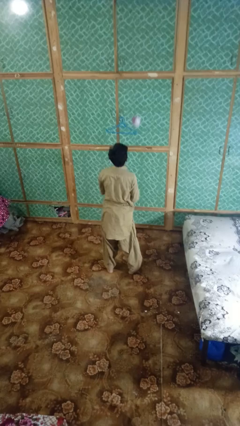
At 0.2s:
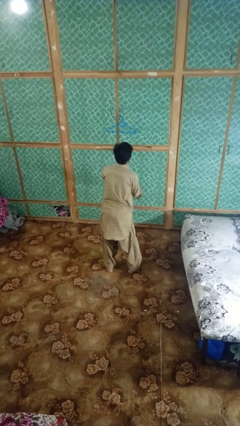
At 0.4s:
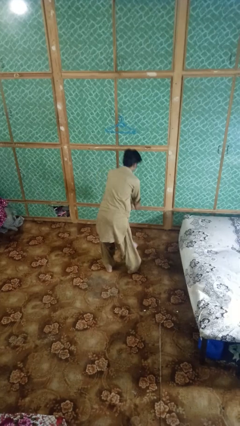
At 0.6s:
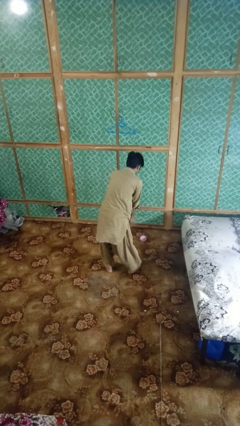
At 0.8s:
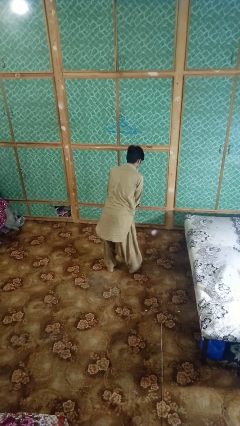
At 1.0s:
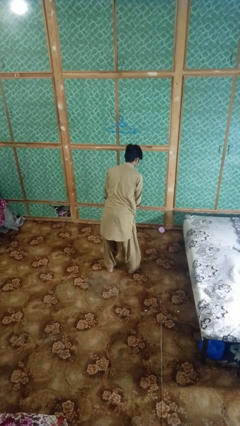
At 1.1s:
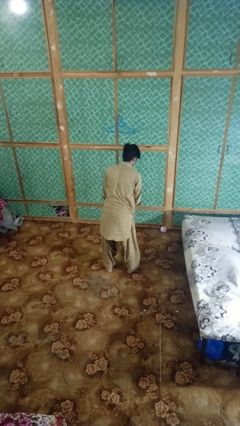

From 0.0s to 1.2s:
person catches dropped object

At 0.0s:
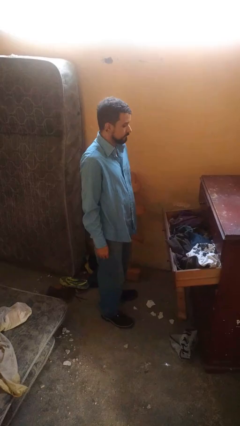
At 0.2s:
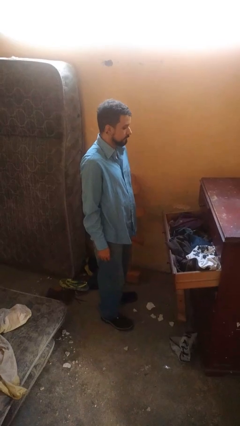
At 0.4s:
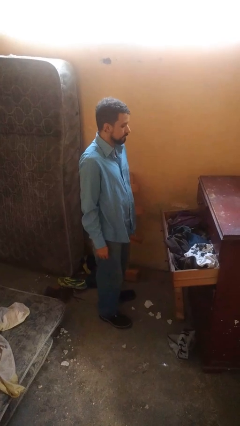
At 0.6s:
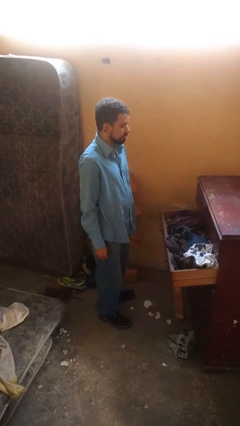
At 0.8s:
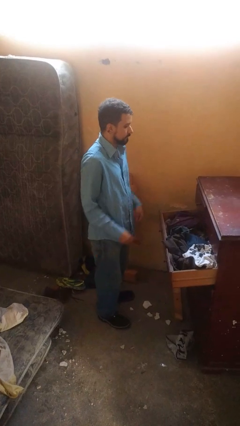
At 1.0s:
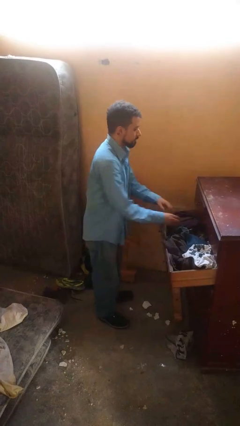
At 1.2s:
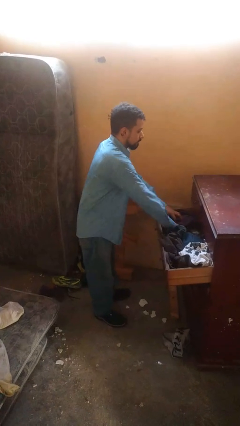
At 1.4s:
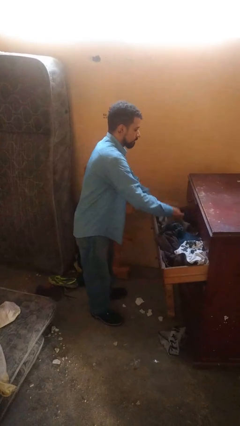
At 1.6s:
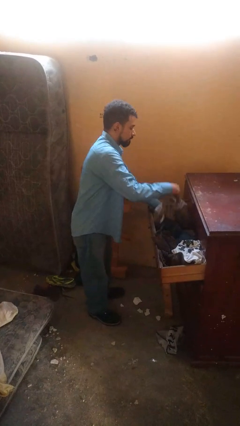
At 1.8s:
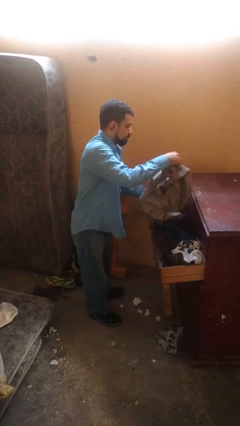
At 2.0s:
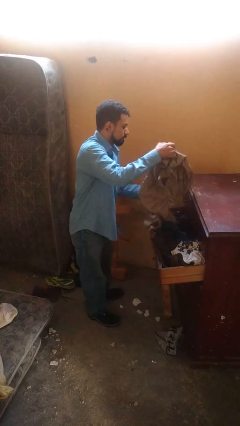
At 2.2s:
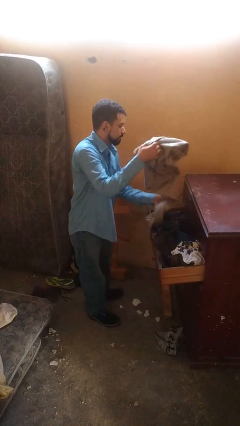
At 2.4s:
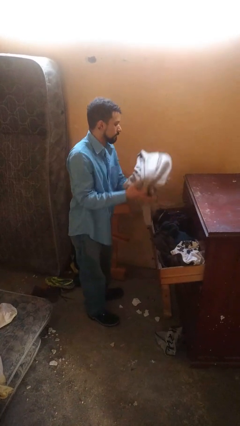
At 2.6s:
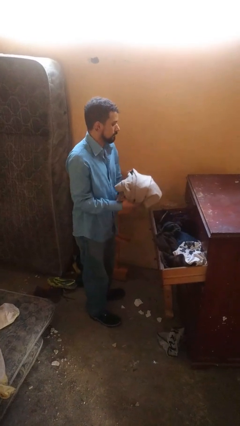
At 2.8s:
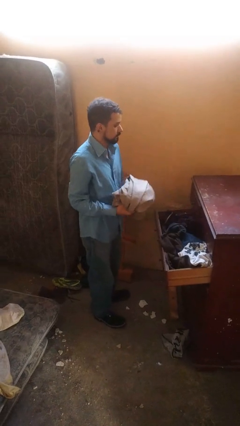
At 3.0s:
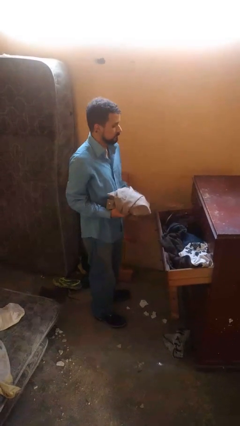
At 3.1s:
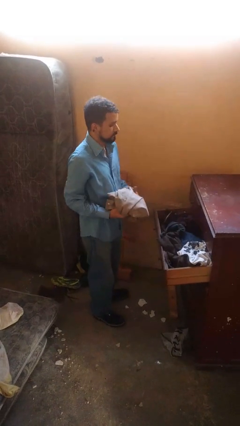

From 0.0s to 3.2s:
person takes clothes from dresser

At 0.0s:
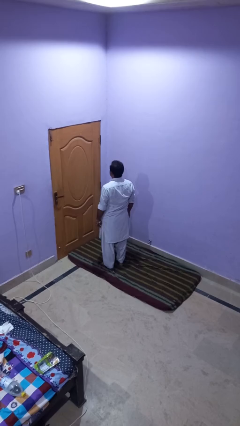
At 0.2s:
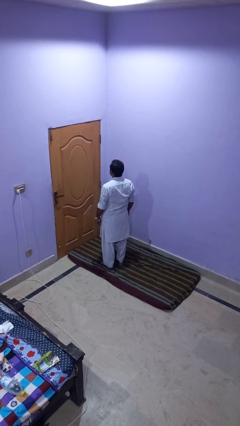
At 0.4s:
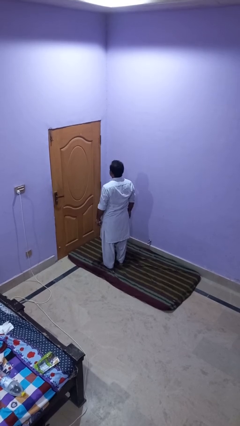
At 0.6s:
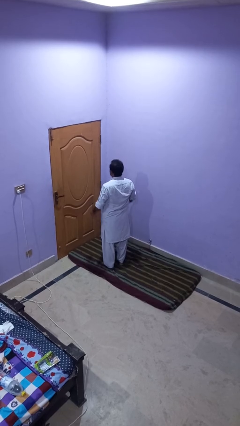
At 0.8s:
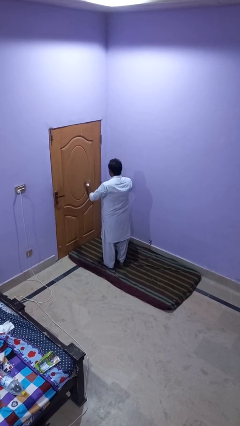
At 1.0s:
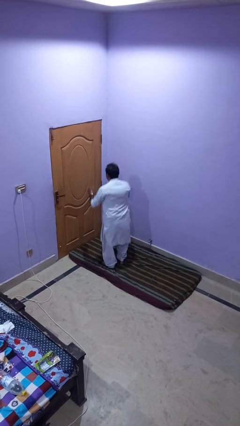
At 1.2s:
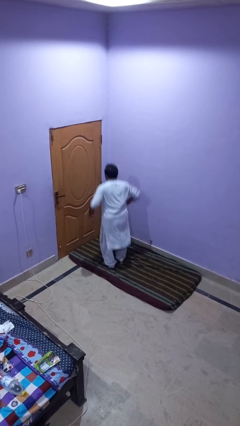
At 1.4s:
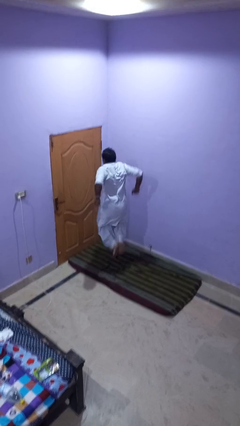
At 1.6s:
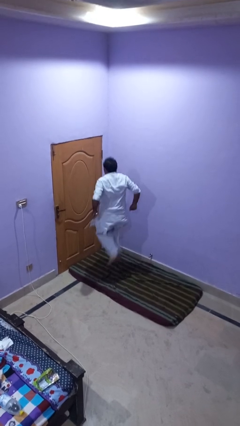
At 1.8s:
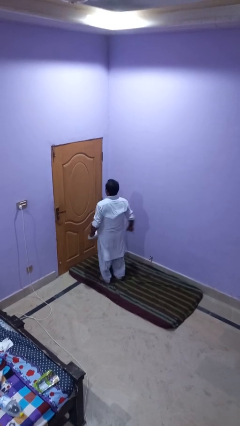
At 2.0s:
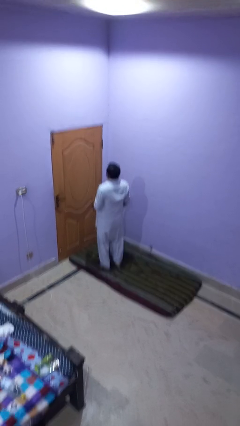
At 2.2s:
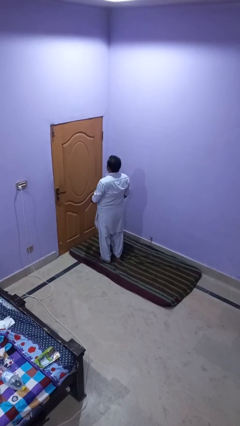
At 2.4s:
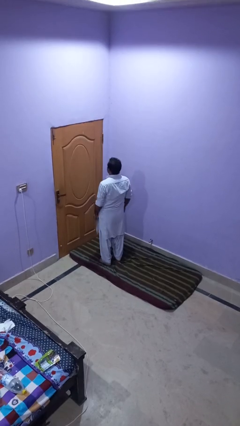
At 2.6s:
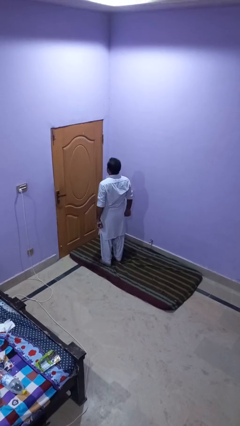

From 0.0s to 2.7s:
person jumps

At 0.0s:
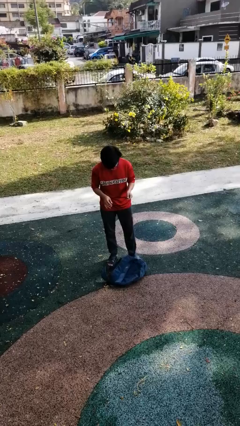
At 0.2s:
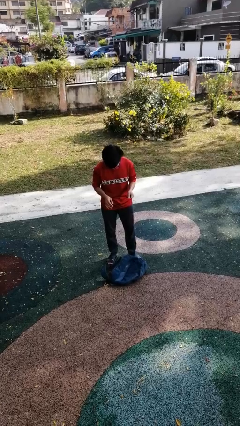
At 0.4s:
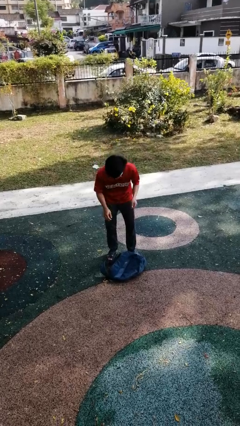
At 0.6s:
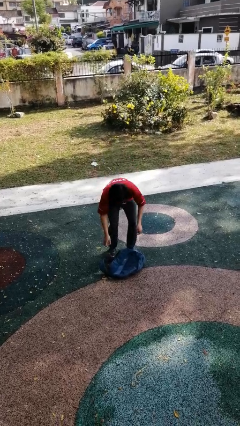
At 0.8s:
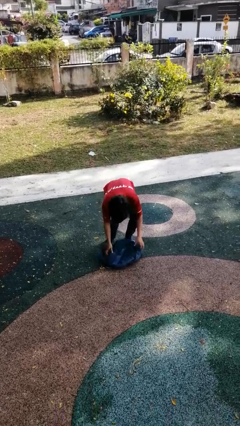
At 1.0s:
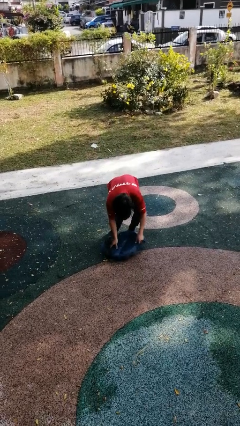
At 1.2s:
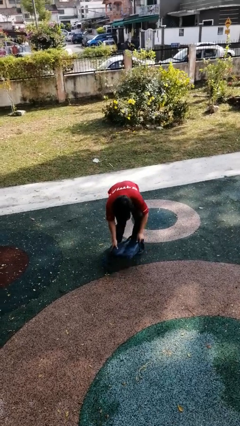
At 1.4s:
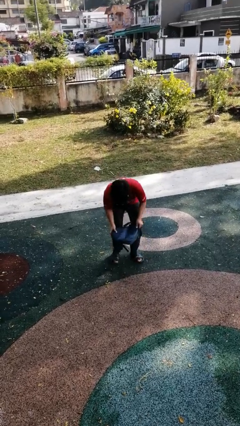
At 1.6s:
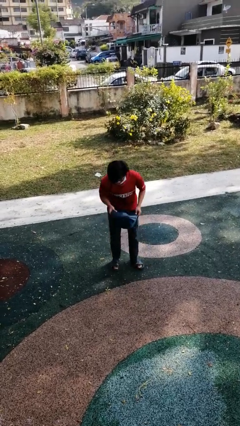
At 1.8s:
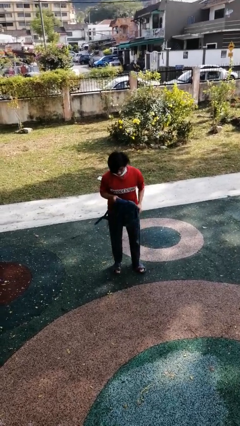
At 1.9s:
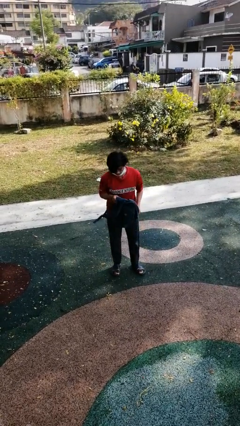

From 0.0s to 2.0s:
person picks up object from floor

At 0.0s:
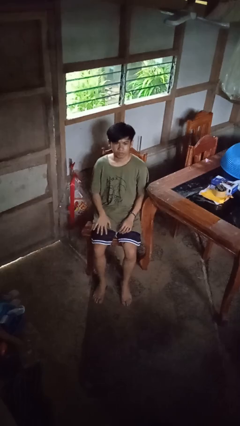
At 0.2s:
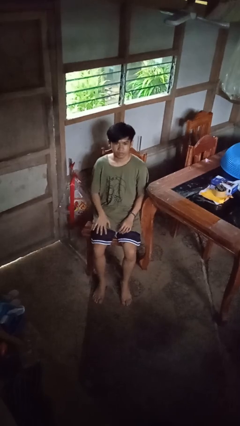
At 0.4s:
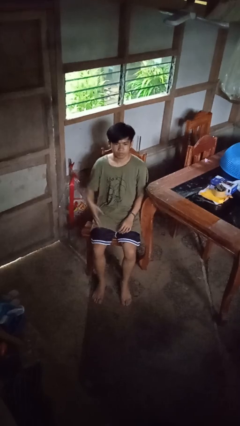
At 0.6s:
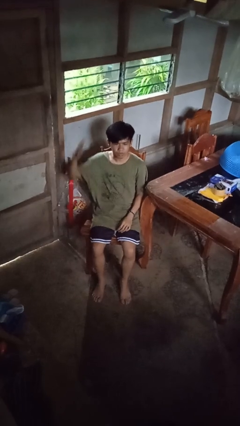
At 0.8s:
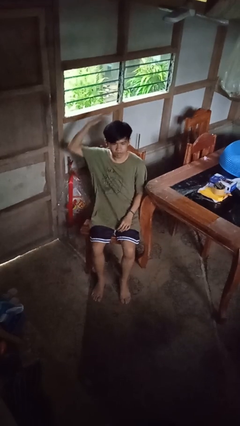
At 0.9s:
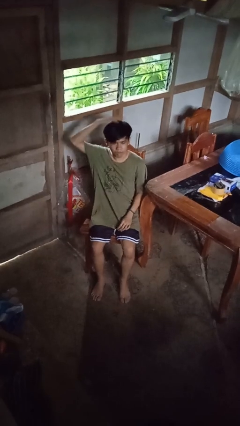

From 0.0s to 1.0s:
person pats head

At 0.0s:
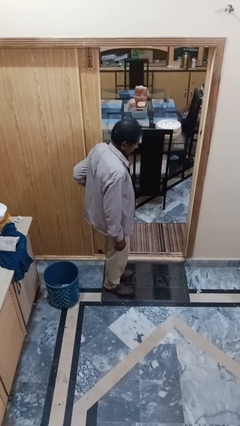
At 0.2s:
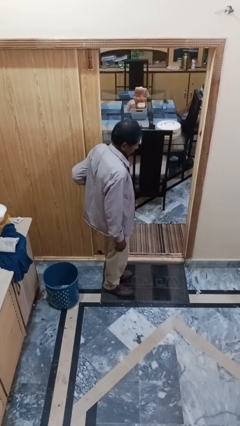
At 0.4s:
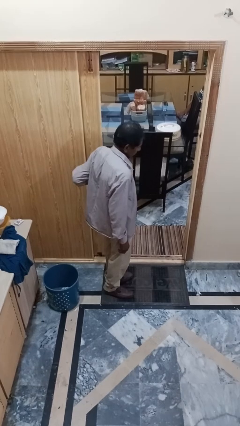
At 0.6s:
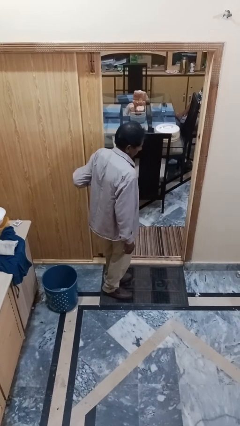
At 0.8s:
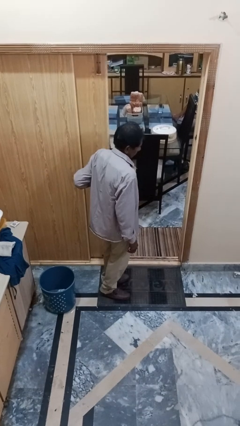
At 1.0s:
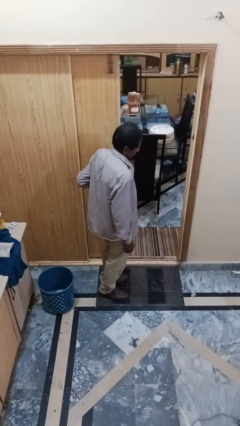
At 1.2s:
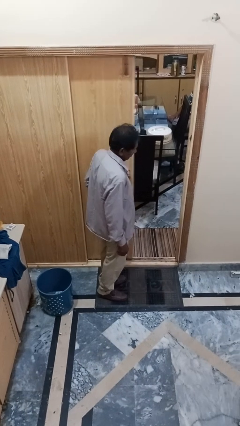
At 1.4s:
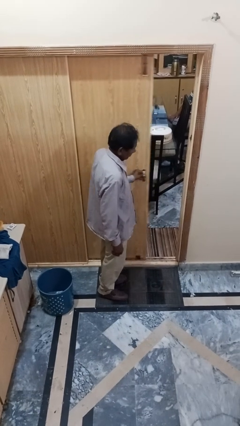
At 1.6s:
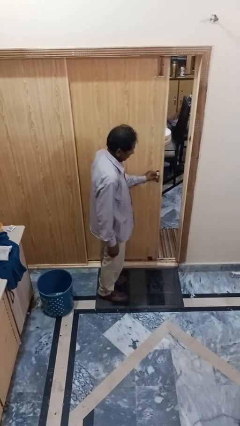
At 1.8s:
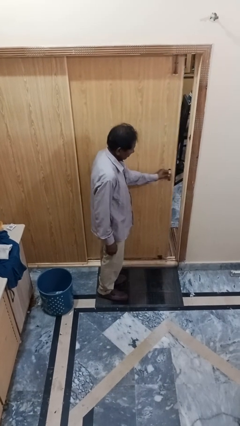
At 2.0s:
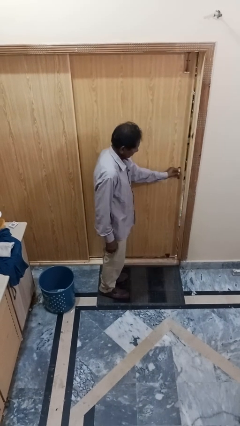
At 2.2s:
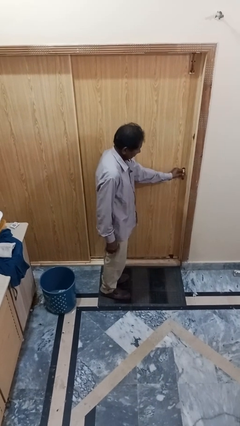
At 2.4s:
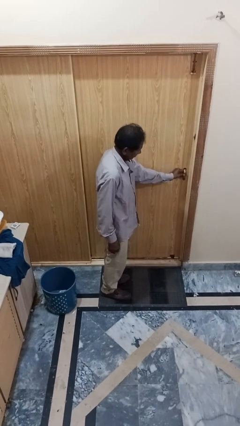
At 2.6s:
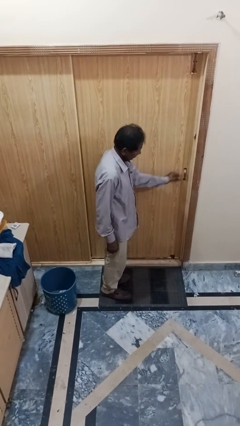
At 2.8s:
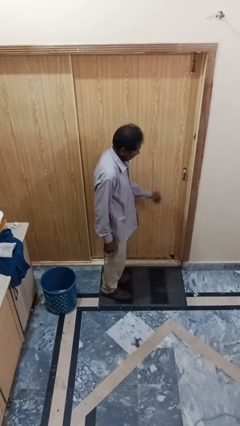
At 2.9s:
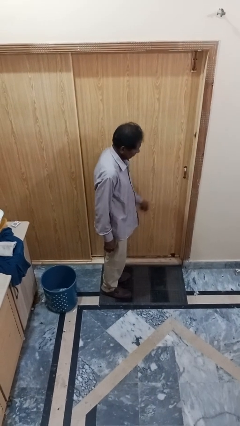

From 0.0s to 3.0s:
person closes sliding door

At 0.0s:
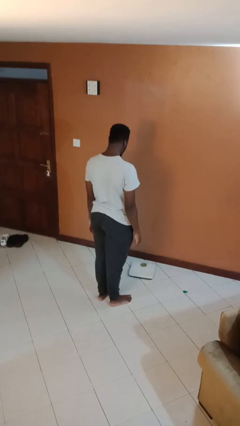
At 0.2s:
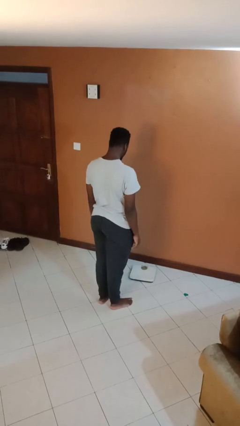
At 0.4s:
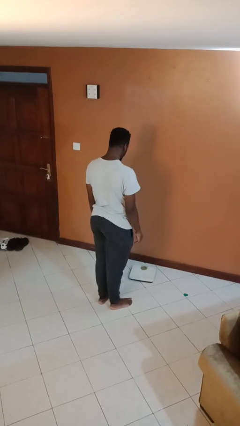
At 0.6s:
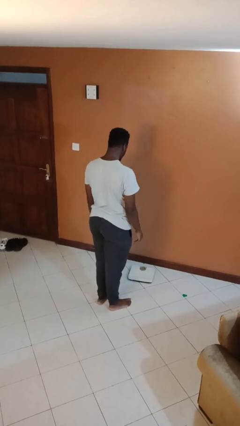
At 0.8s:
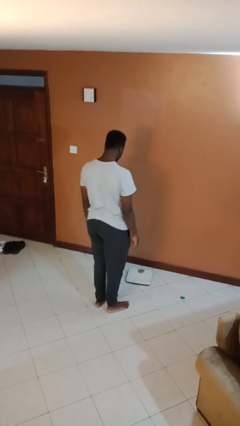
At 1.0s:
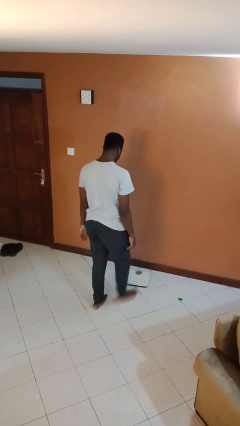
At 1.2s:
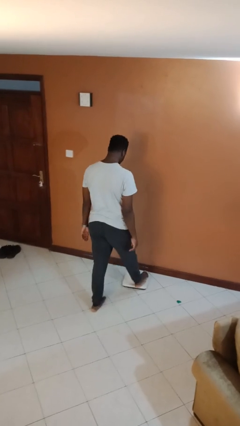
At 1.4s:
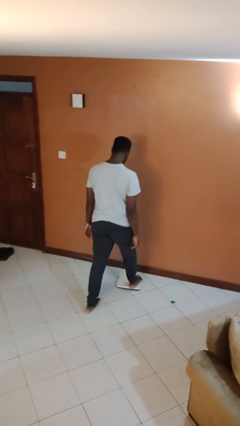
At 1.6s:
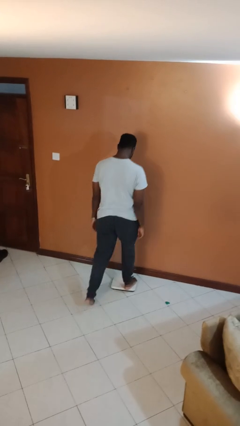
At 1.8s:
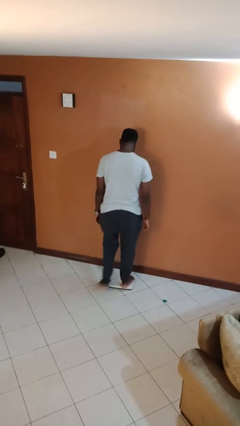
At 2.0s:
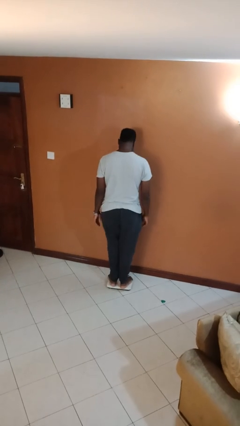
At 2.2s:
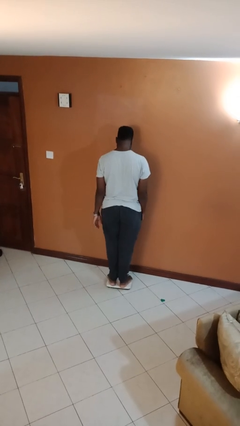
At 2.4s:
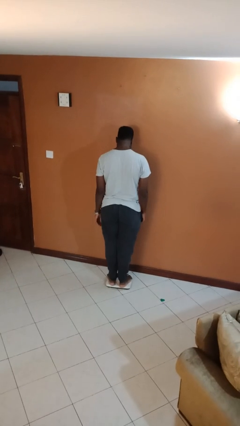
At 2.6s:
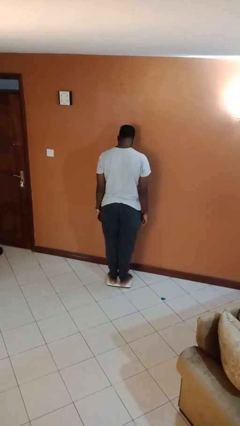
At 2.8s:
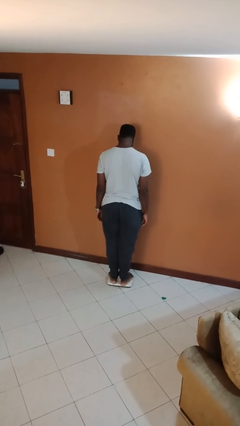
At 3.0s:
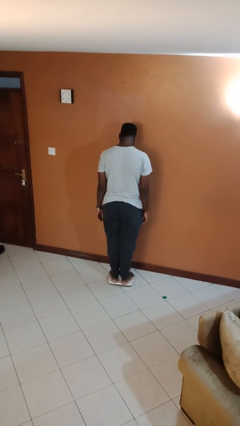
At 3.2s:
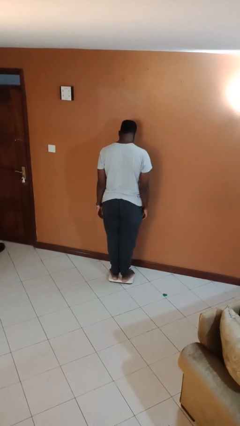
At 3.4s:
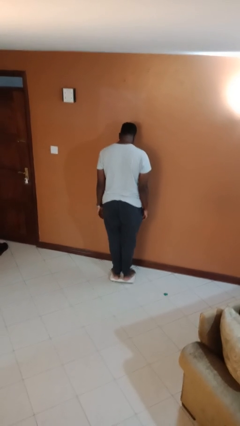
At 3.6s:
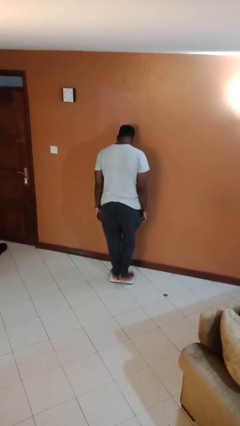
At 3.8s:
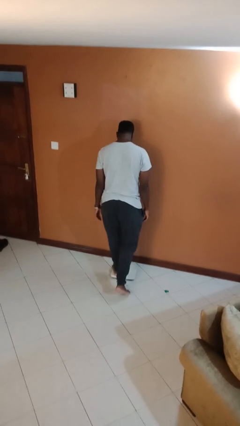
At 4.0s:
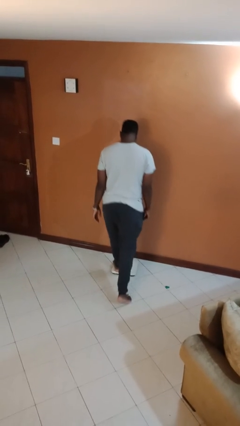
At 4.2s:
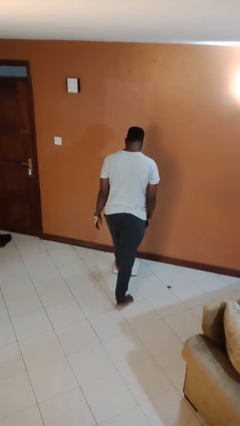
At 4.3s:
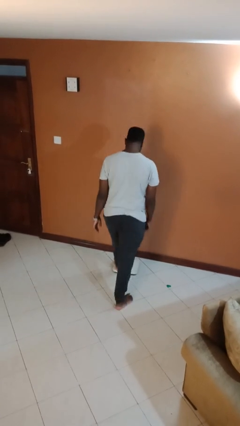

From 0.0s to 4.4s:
person uses bodyweight scale
